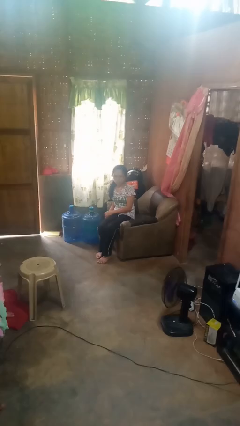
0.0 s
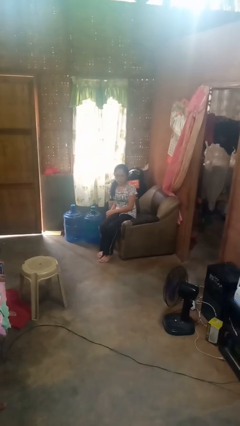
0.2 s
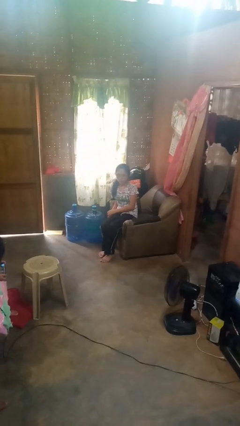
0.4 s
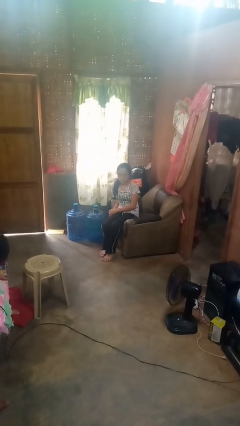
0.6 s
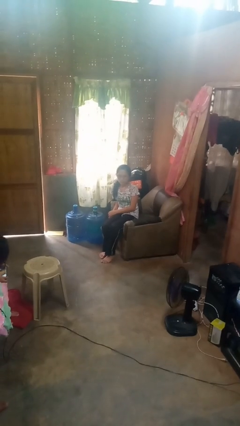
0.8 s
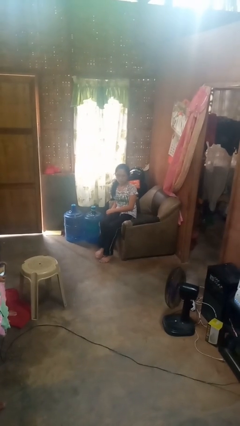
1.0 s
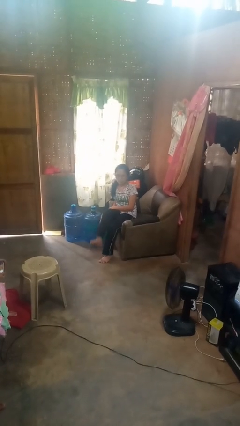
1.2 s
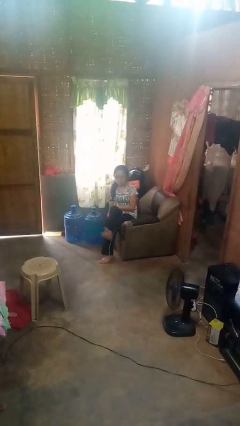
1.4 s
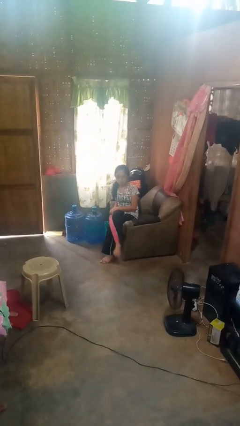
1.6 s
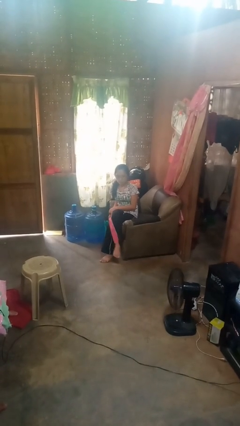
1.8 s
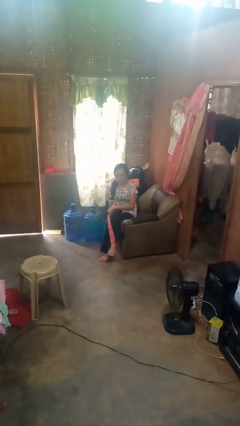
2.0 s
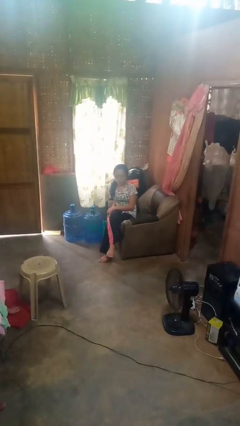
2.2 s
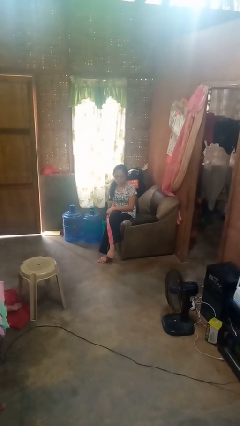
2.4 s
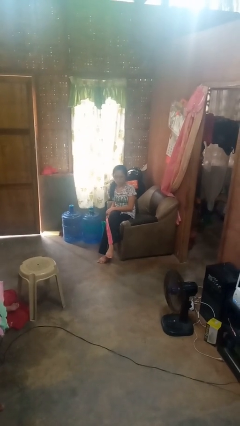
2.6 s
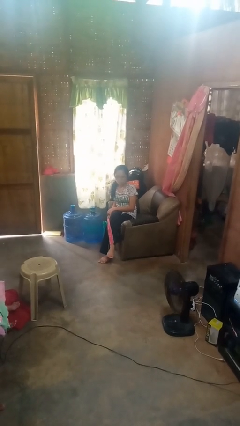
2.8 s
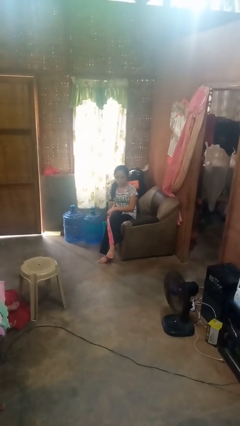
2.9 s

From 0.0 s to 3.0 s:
person crosses legs

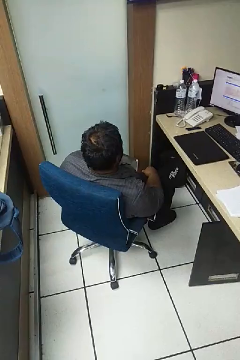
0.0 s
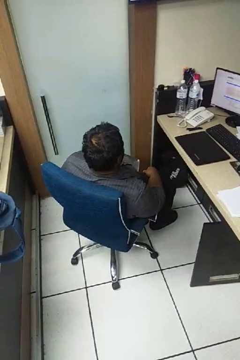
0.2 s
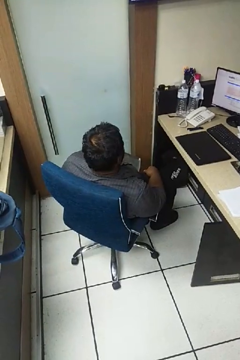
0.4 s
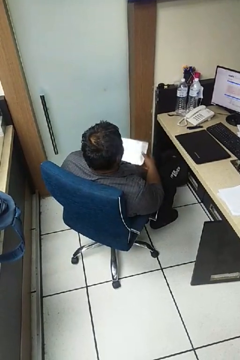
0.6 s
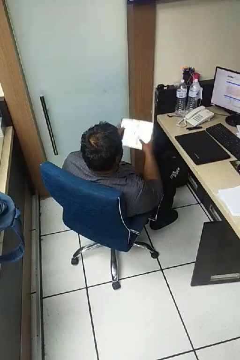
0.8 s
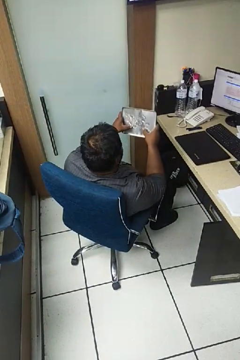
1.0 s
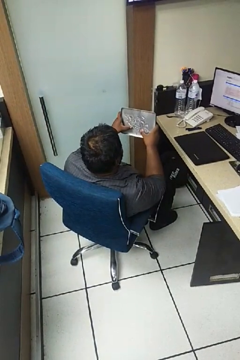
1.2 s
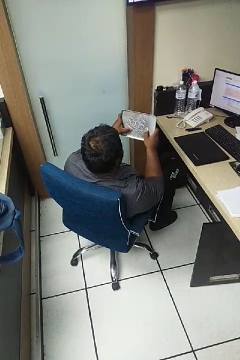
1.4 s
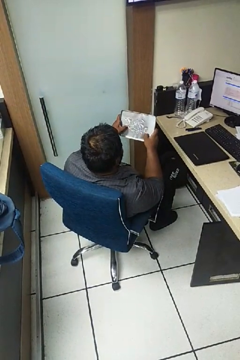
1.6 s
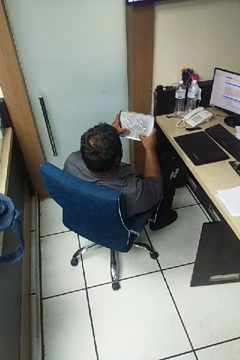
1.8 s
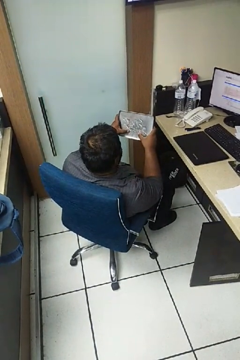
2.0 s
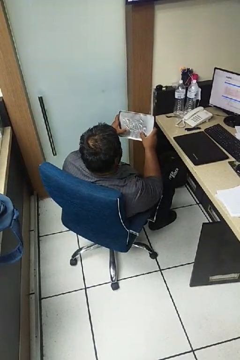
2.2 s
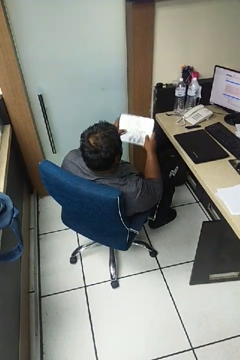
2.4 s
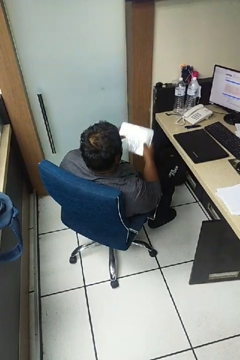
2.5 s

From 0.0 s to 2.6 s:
person interacts with tablet

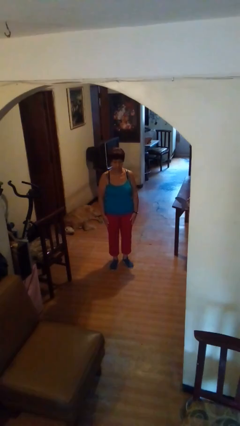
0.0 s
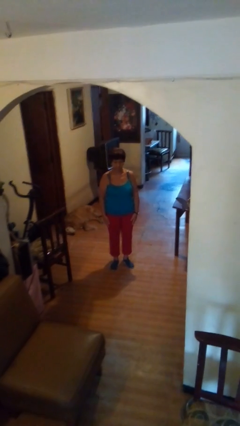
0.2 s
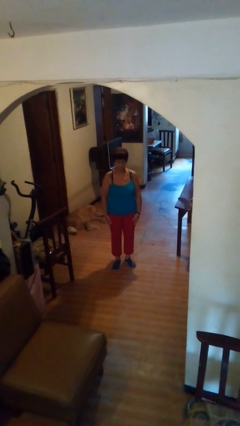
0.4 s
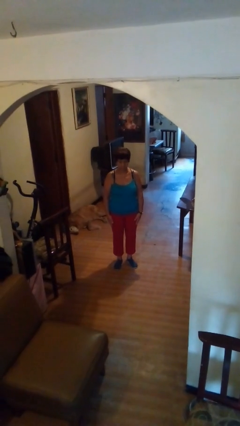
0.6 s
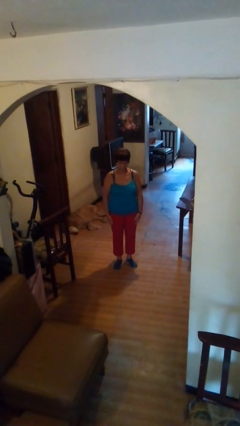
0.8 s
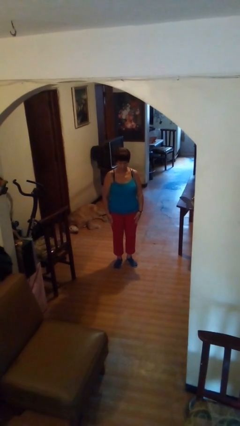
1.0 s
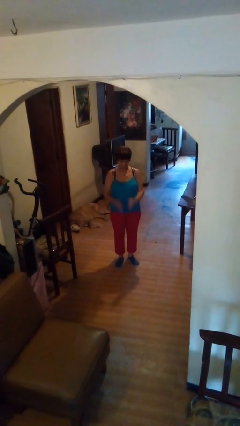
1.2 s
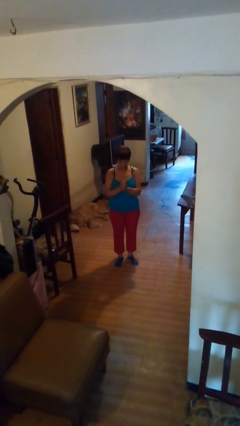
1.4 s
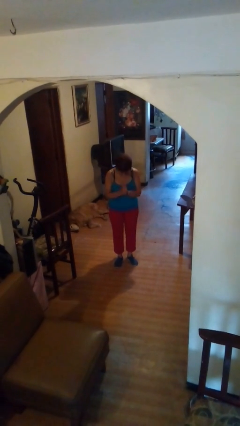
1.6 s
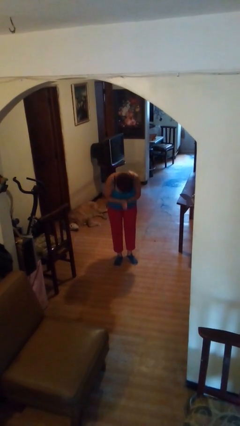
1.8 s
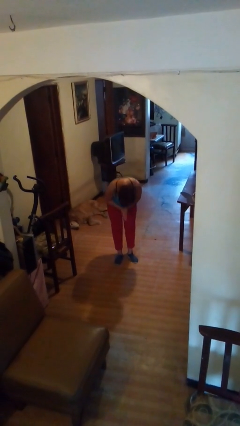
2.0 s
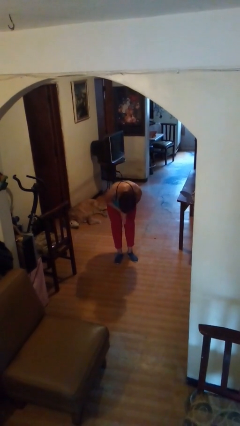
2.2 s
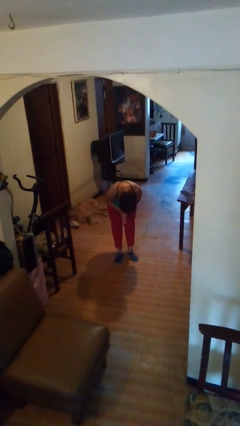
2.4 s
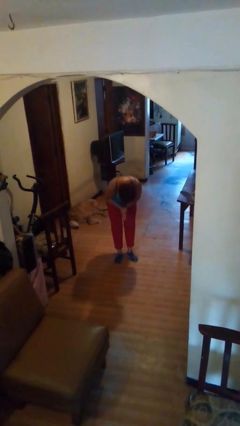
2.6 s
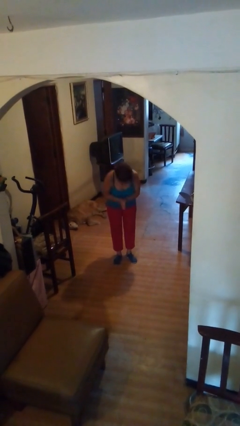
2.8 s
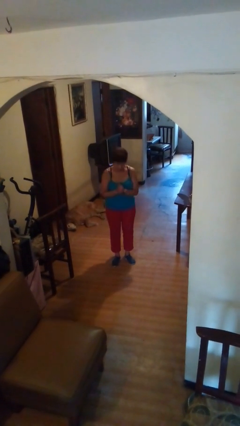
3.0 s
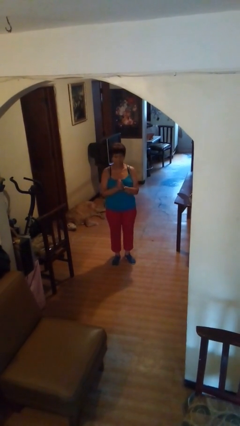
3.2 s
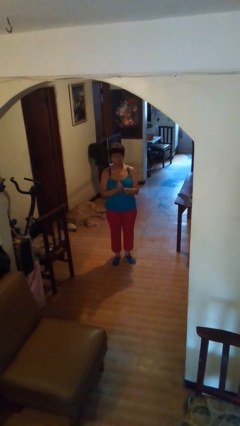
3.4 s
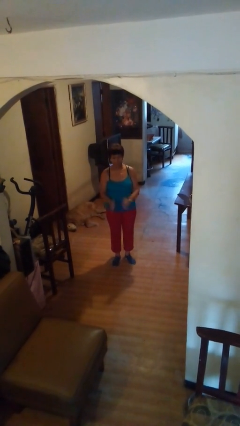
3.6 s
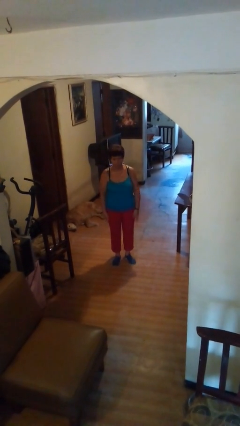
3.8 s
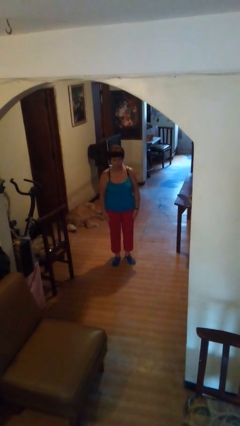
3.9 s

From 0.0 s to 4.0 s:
person bows

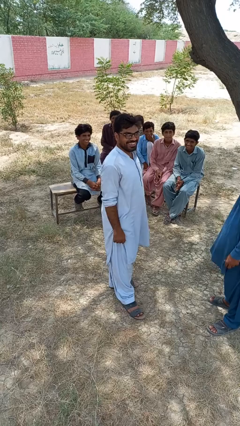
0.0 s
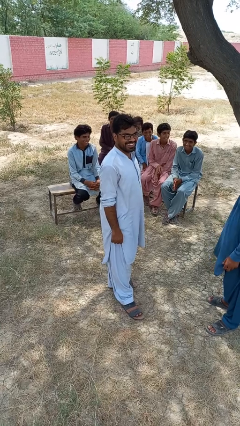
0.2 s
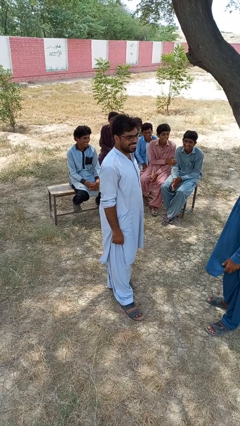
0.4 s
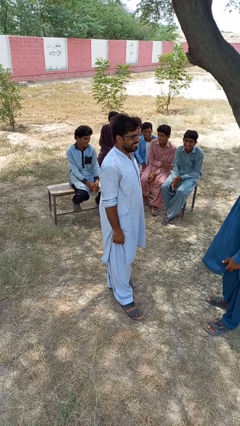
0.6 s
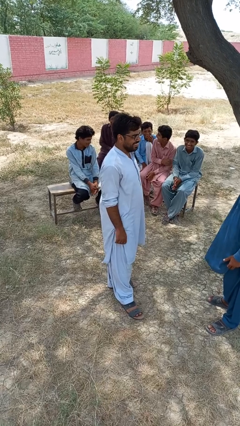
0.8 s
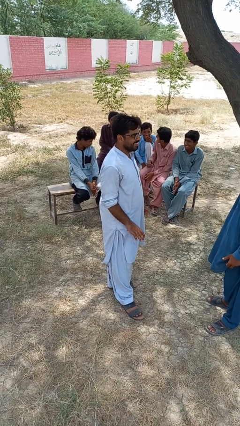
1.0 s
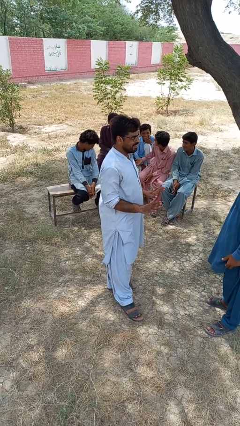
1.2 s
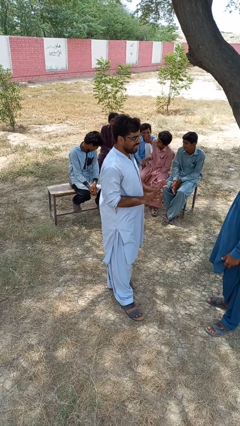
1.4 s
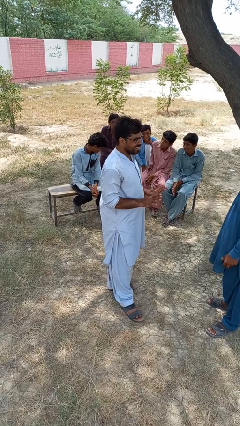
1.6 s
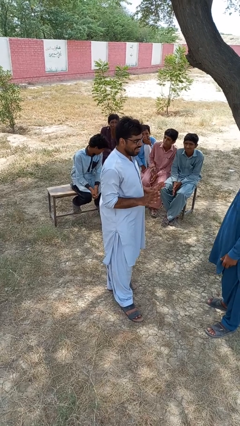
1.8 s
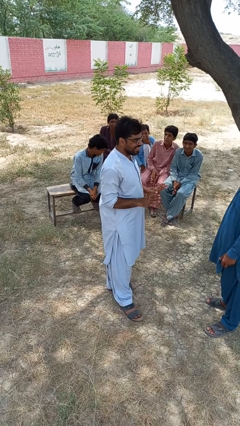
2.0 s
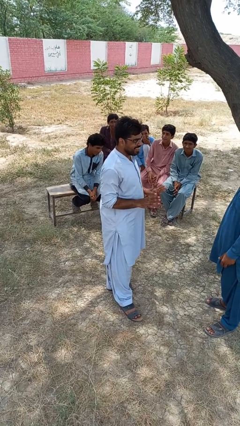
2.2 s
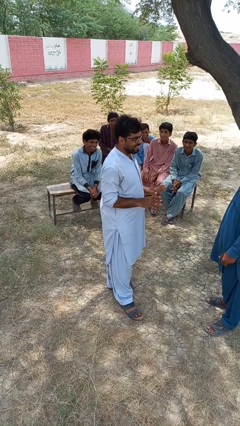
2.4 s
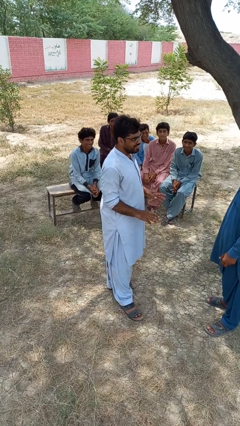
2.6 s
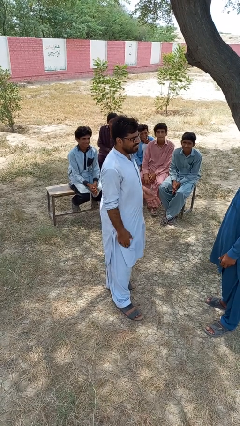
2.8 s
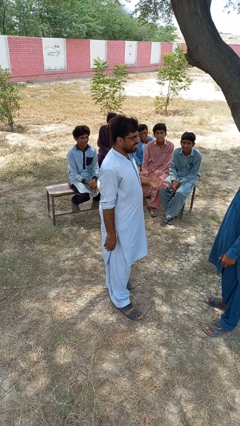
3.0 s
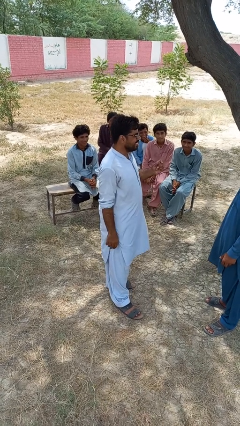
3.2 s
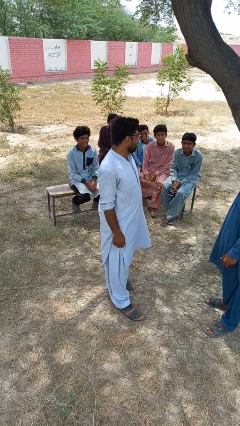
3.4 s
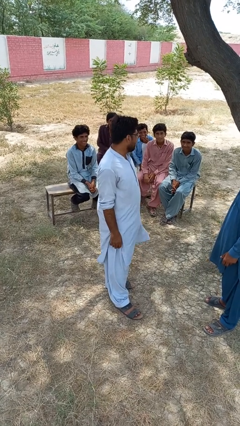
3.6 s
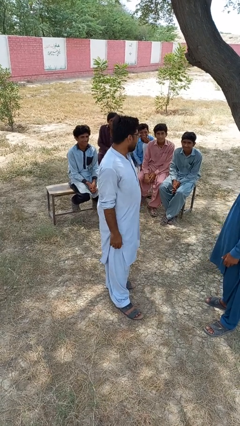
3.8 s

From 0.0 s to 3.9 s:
person laughs with person

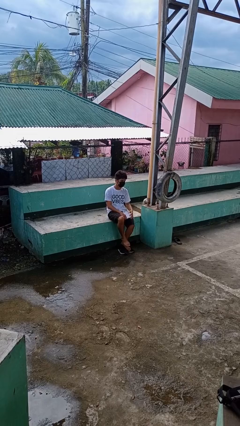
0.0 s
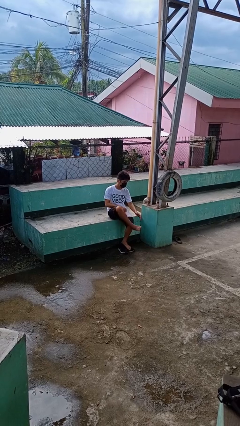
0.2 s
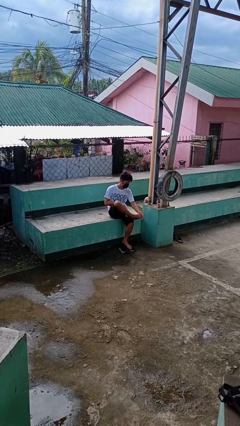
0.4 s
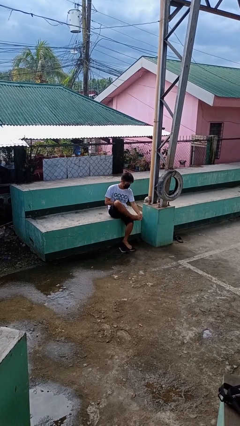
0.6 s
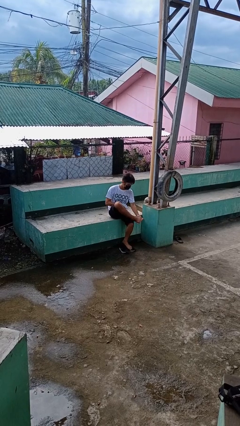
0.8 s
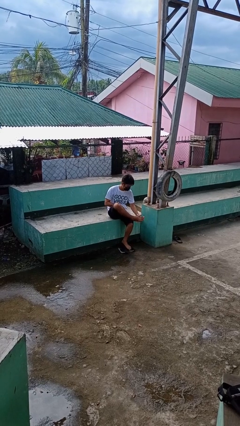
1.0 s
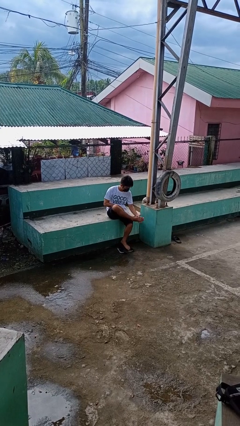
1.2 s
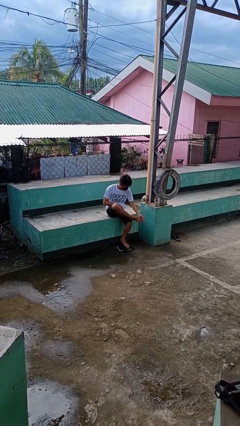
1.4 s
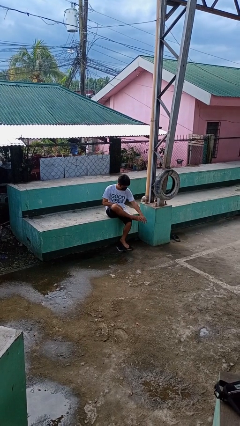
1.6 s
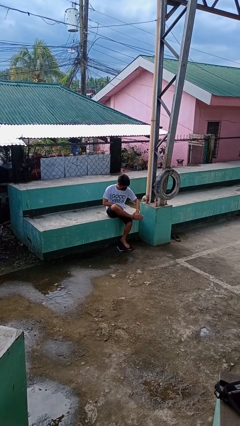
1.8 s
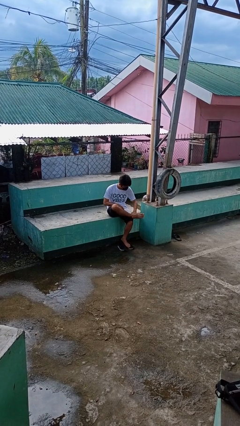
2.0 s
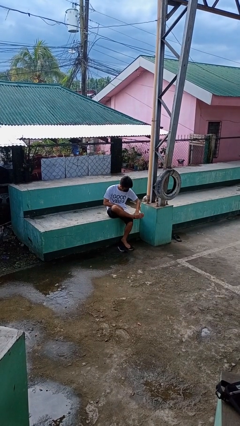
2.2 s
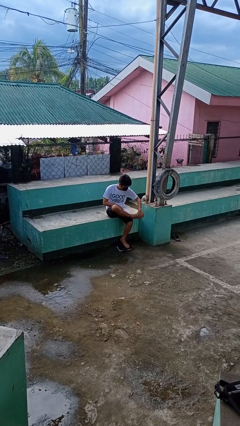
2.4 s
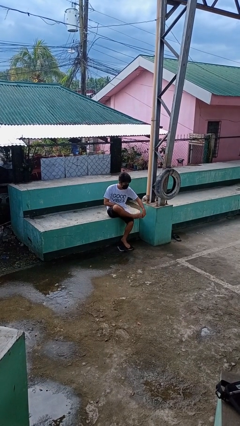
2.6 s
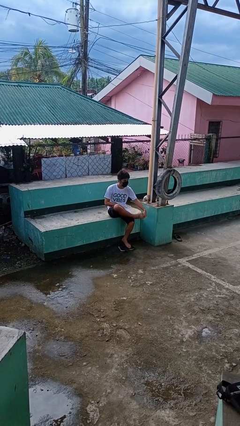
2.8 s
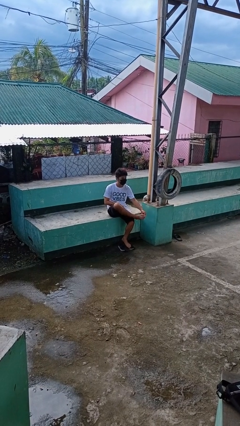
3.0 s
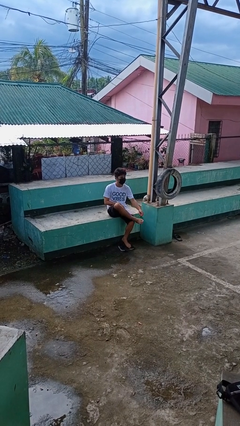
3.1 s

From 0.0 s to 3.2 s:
person rubs foot

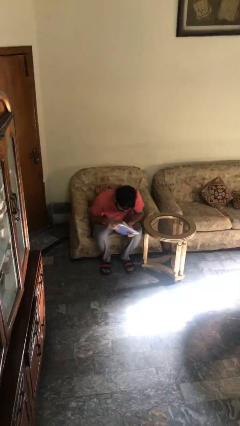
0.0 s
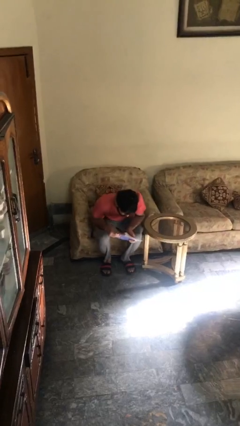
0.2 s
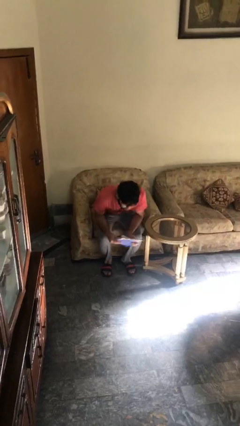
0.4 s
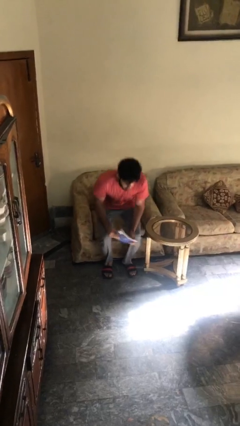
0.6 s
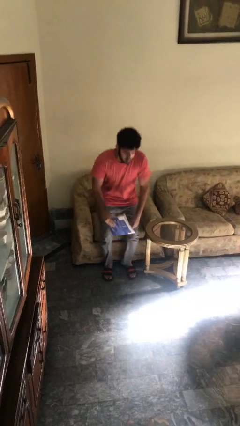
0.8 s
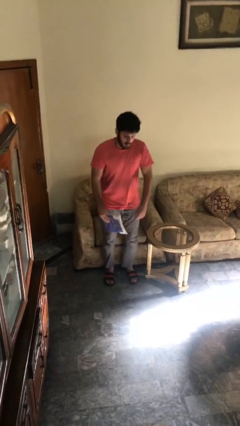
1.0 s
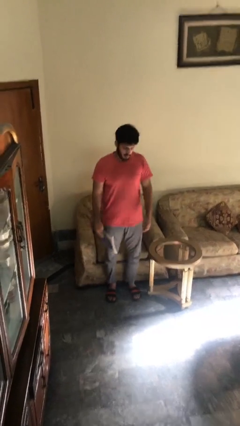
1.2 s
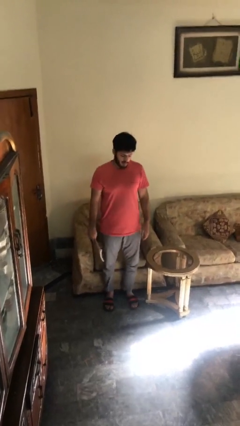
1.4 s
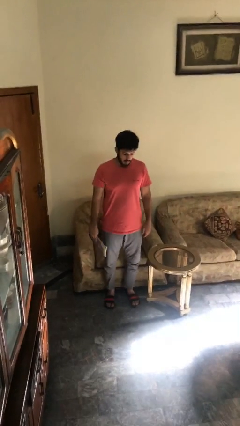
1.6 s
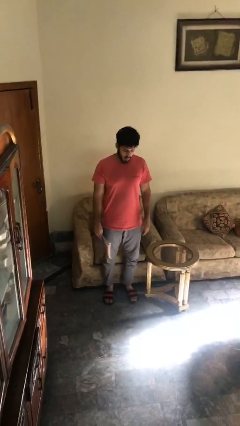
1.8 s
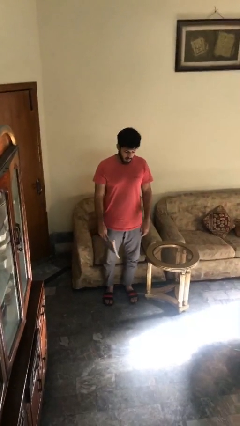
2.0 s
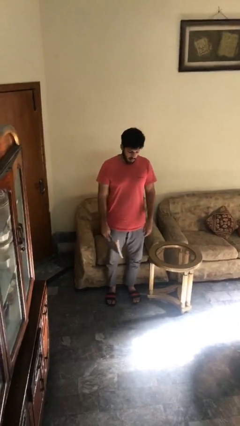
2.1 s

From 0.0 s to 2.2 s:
person stands up
